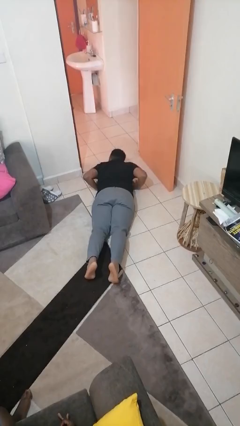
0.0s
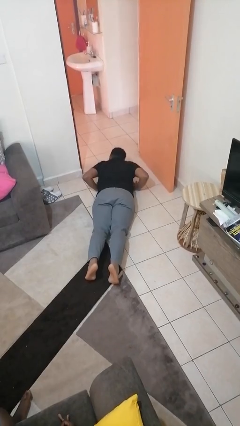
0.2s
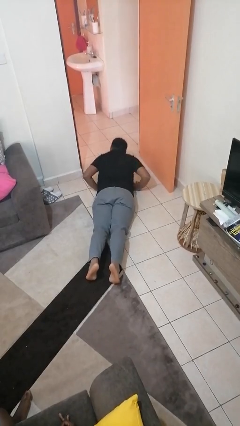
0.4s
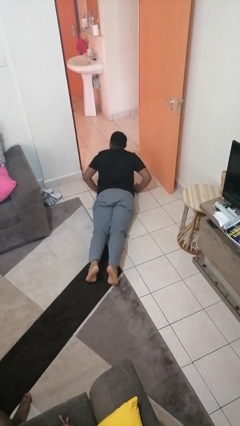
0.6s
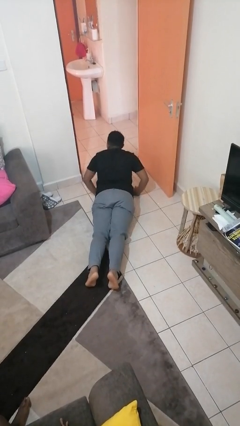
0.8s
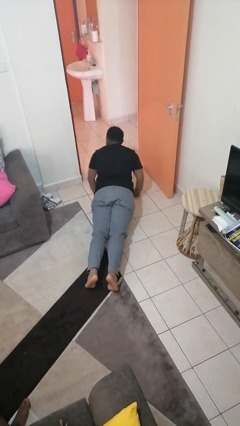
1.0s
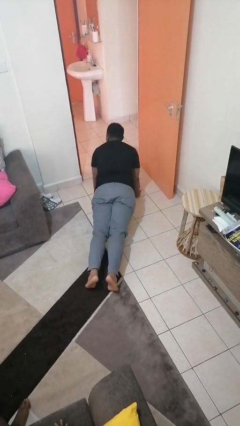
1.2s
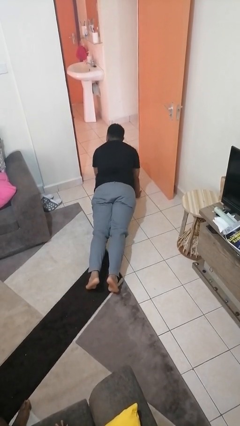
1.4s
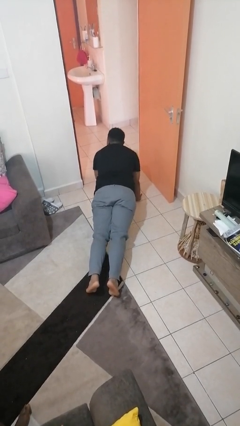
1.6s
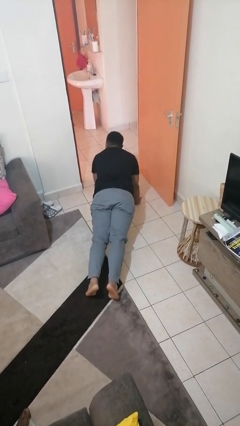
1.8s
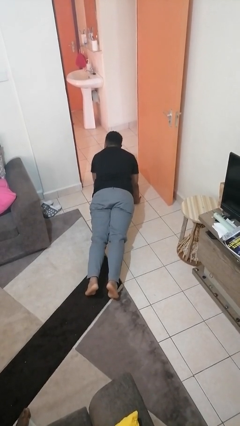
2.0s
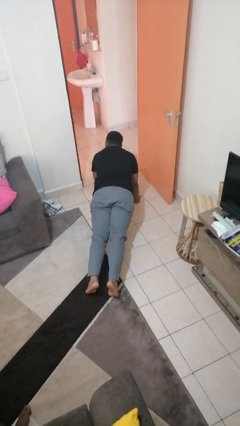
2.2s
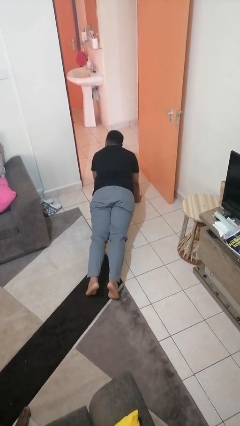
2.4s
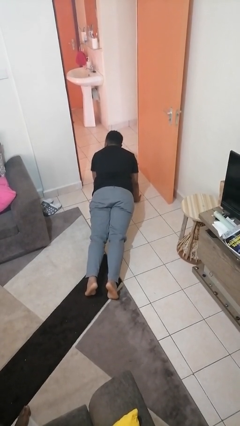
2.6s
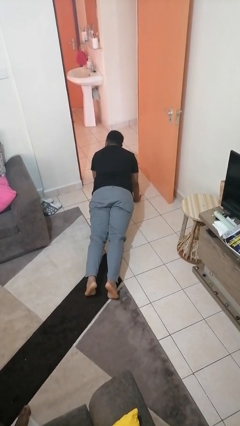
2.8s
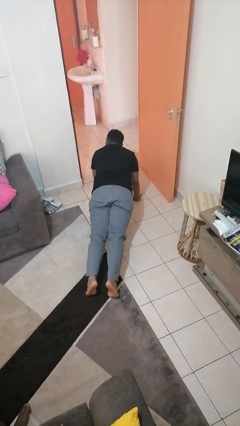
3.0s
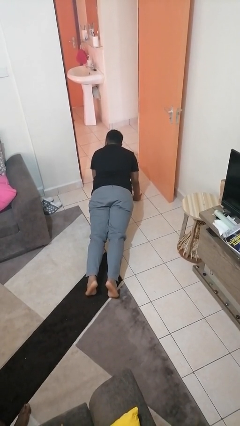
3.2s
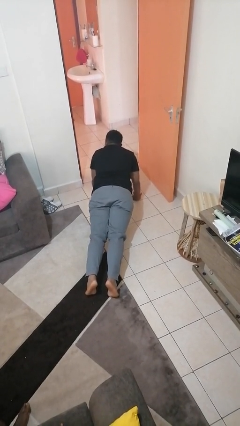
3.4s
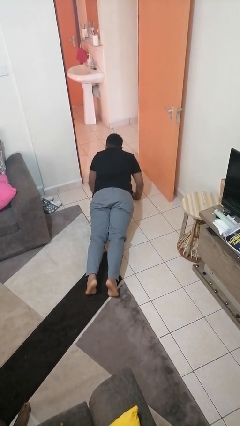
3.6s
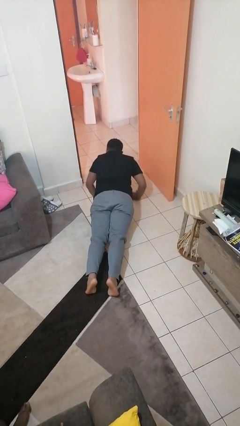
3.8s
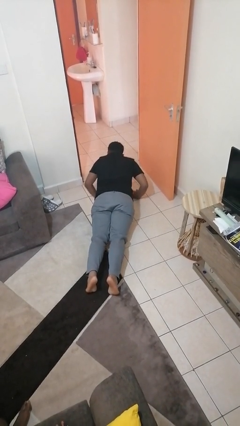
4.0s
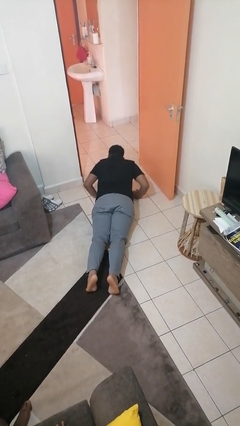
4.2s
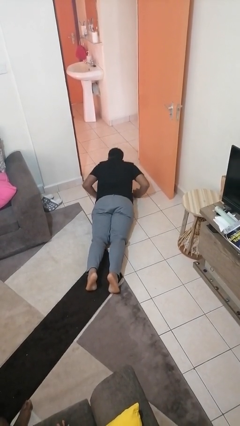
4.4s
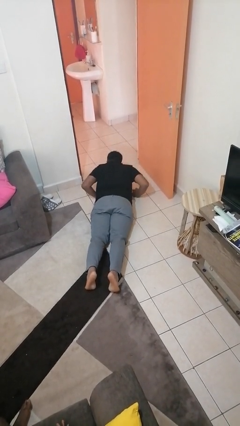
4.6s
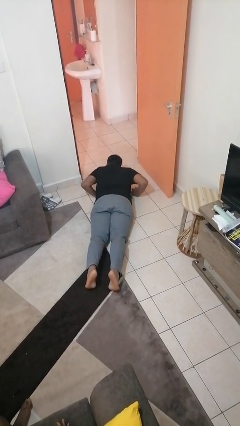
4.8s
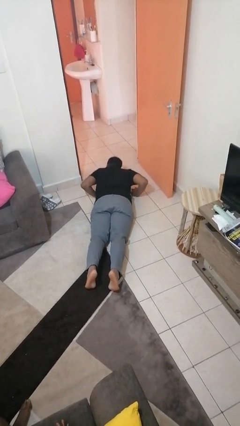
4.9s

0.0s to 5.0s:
person exercises with pushup

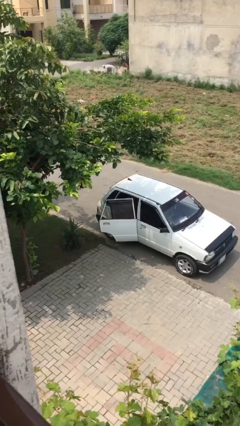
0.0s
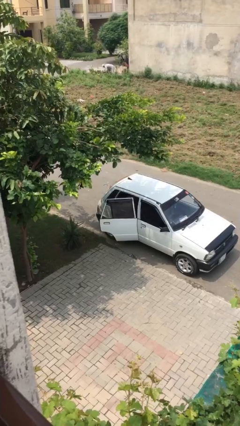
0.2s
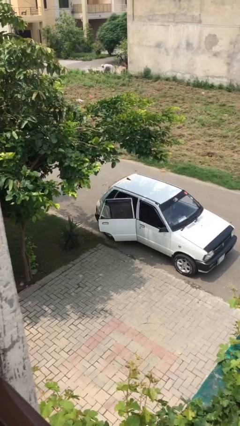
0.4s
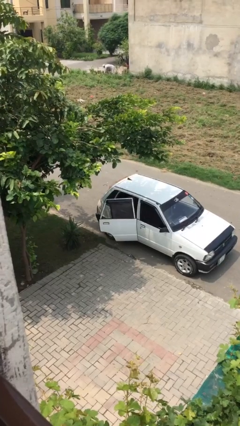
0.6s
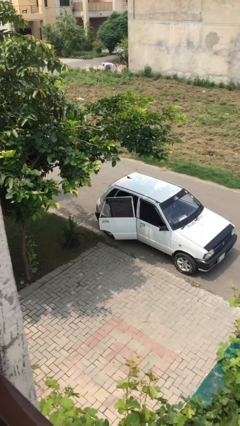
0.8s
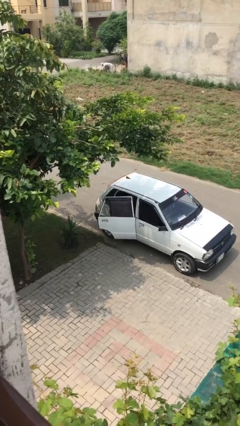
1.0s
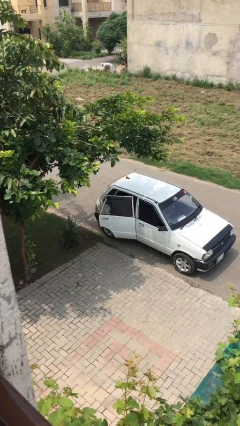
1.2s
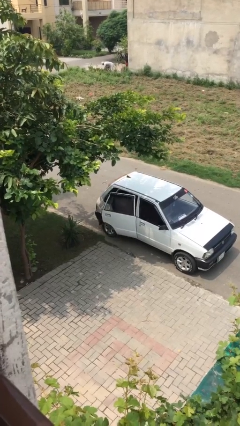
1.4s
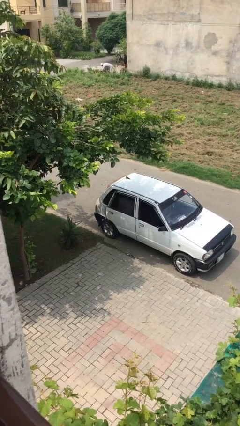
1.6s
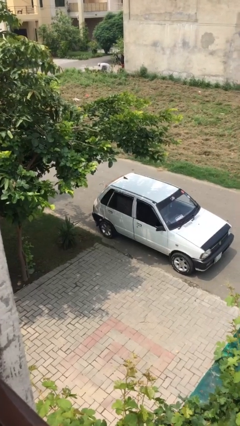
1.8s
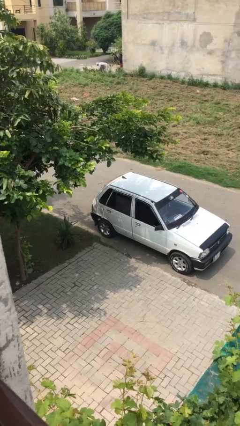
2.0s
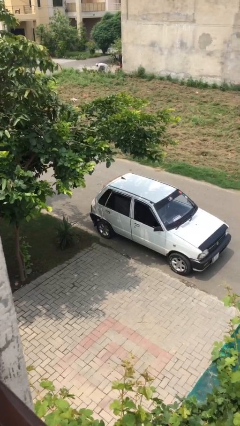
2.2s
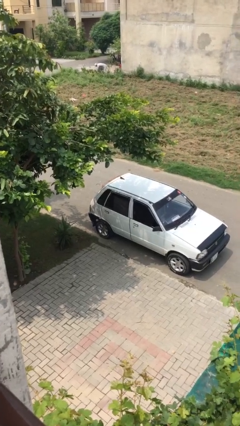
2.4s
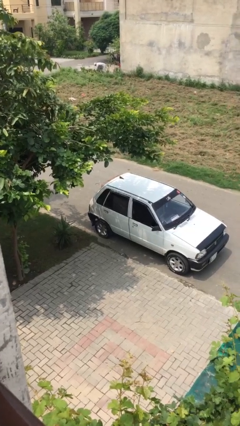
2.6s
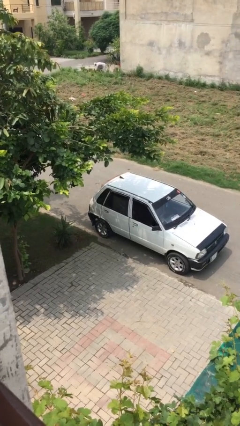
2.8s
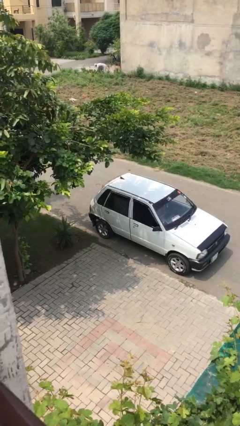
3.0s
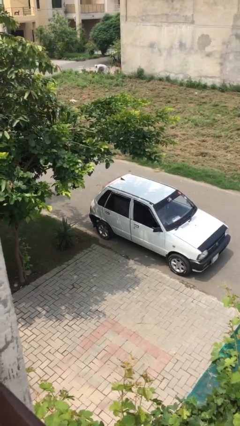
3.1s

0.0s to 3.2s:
person closes car door

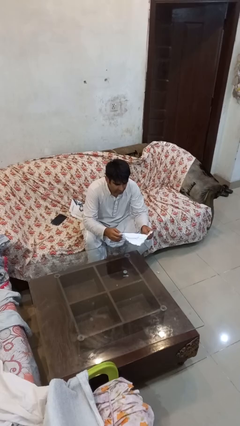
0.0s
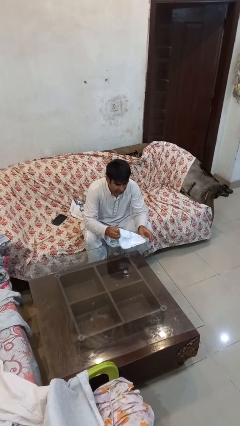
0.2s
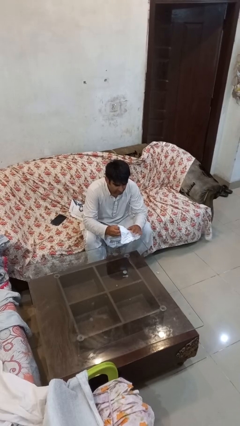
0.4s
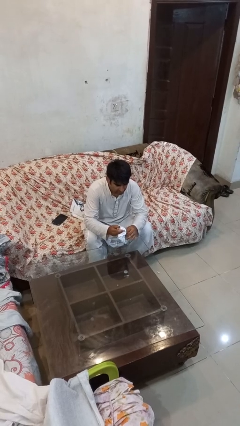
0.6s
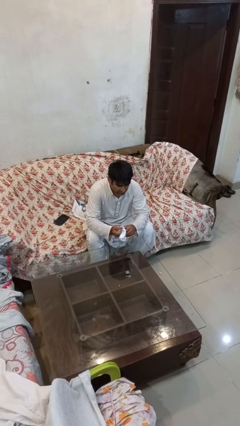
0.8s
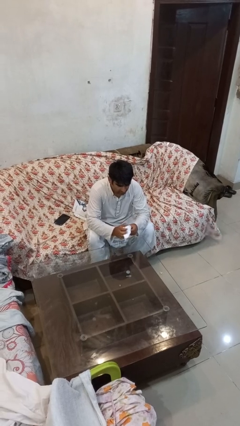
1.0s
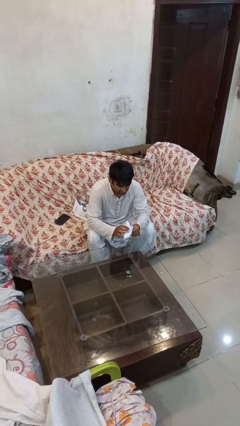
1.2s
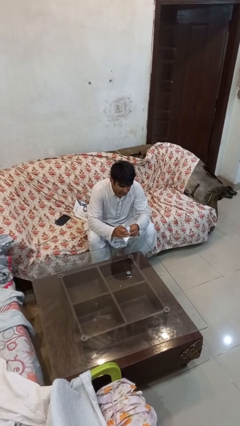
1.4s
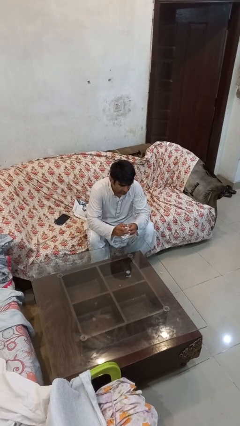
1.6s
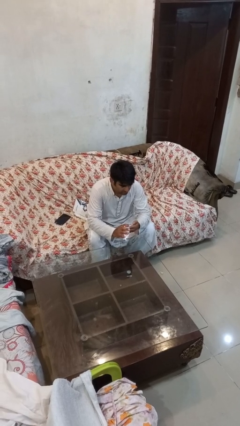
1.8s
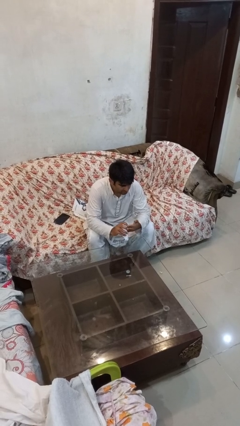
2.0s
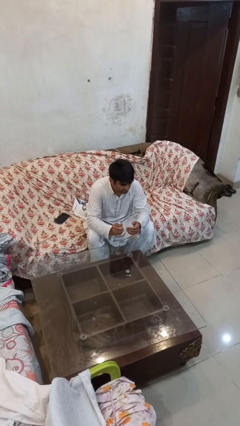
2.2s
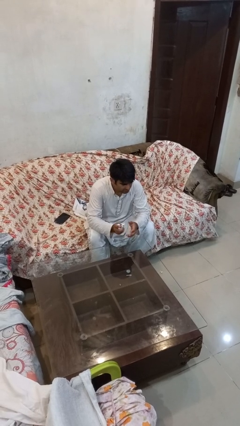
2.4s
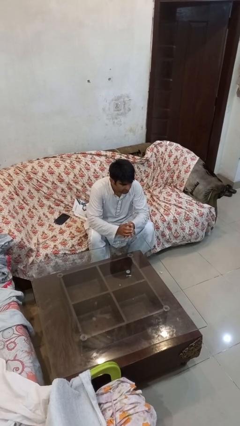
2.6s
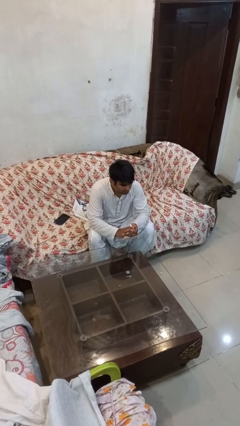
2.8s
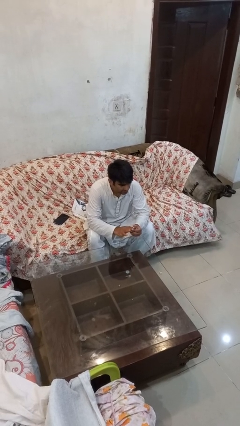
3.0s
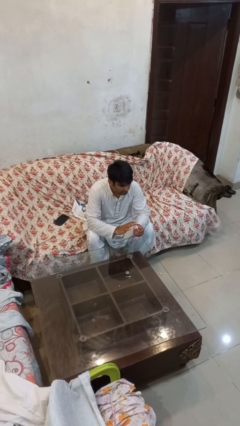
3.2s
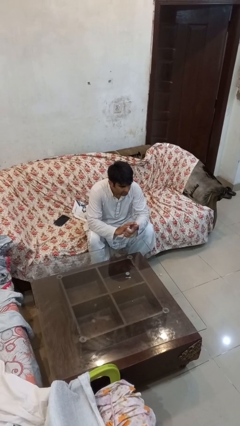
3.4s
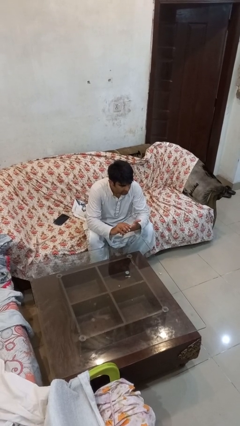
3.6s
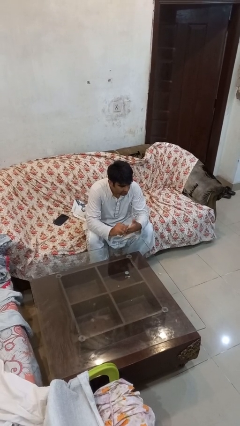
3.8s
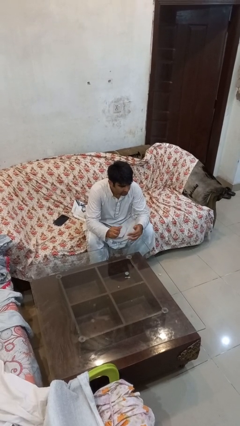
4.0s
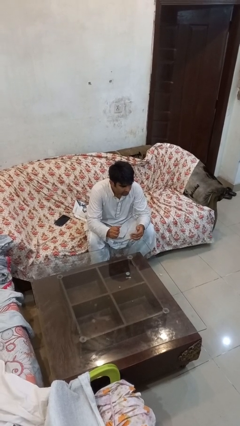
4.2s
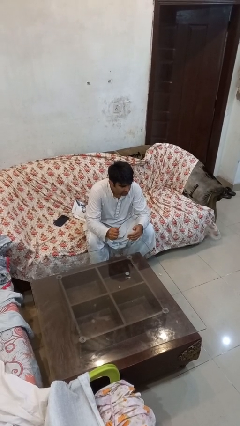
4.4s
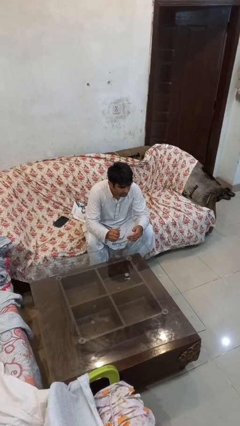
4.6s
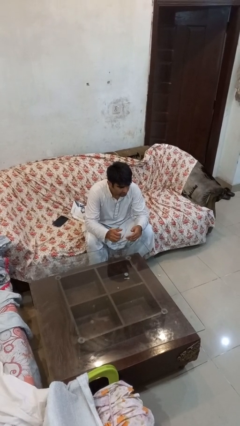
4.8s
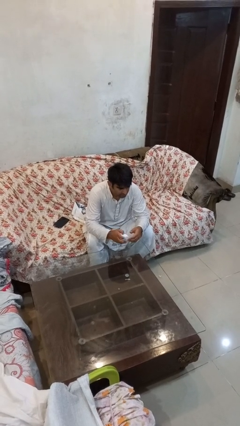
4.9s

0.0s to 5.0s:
person crumples paper

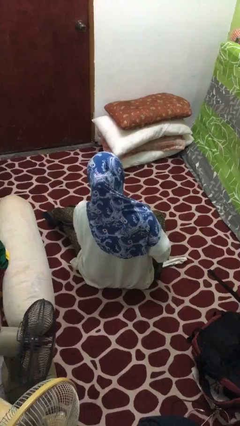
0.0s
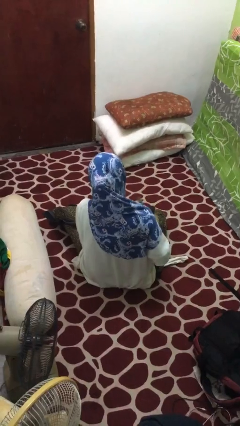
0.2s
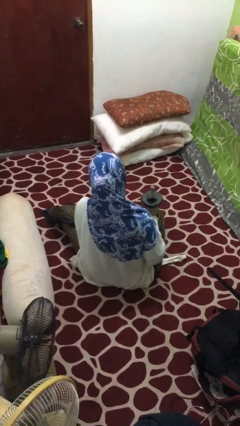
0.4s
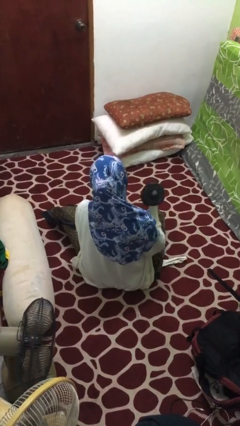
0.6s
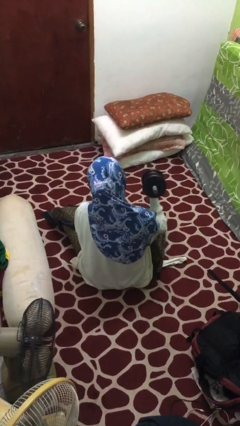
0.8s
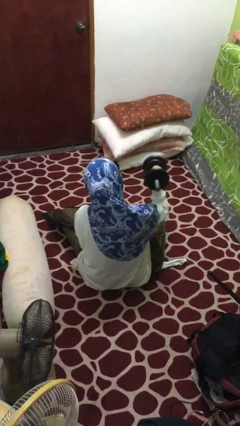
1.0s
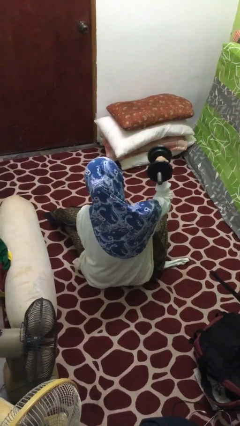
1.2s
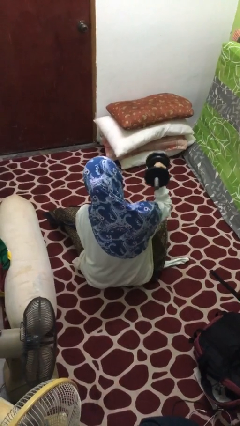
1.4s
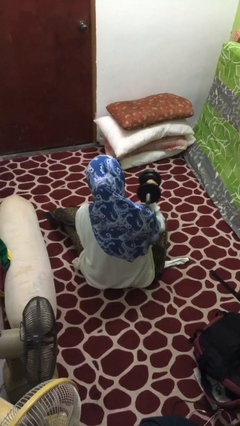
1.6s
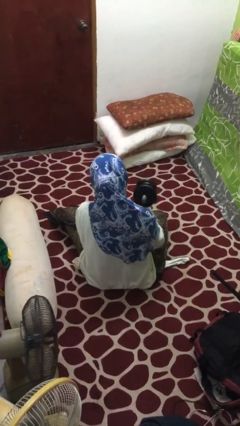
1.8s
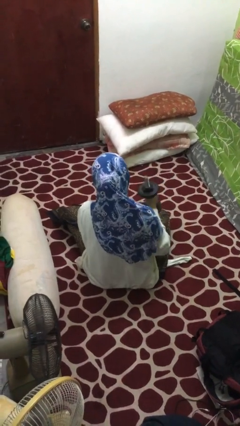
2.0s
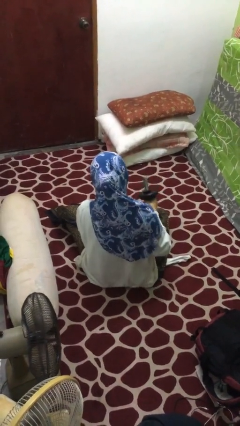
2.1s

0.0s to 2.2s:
person lifts dumbbells

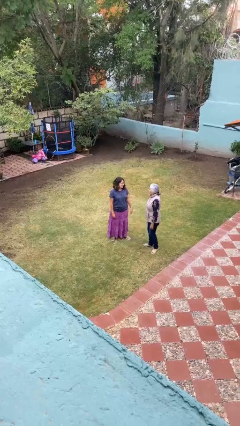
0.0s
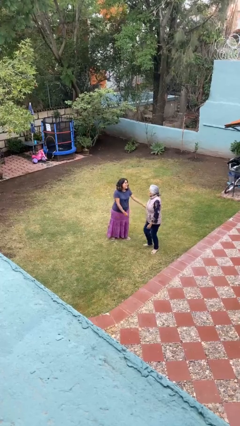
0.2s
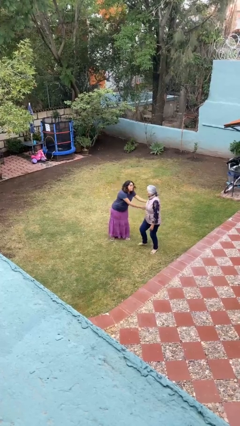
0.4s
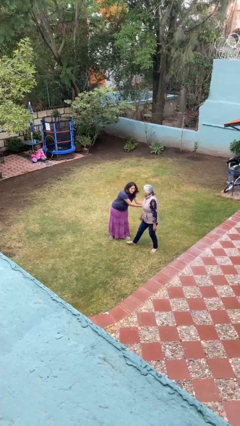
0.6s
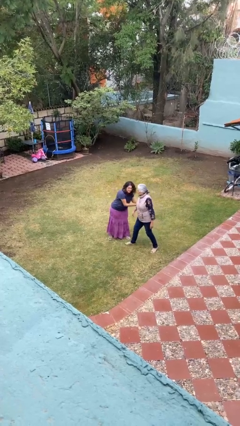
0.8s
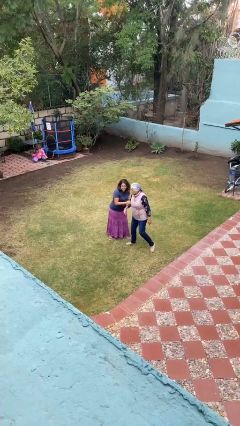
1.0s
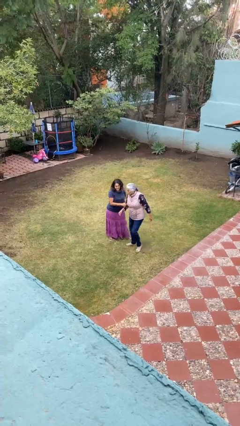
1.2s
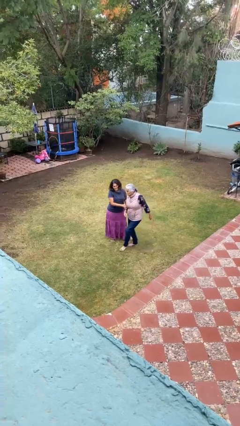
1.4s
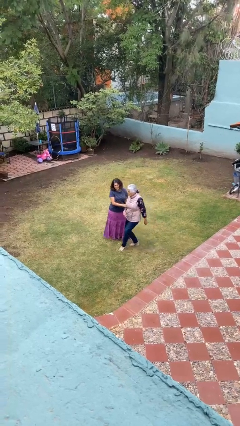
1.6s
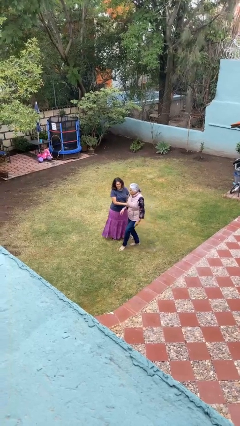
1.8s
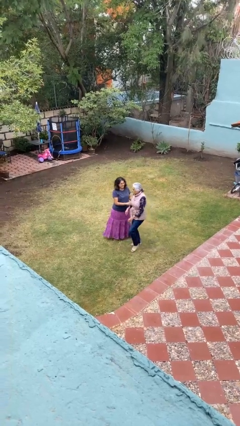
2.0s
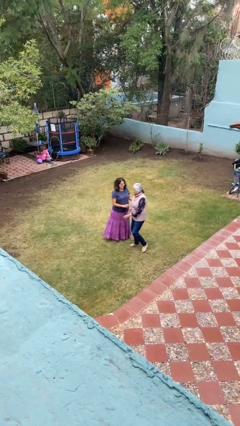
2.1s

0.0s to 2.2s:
person grabs person by bicep

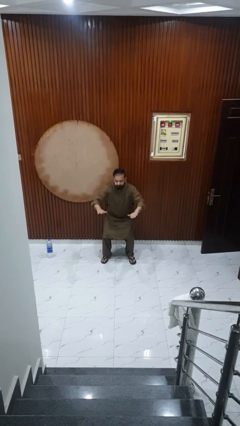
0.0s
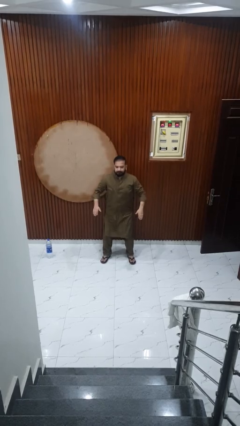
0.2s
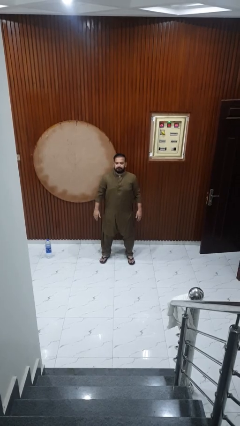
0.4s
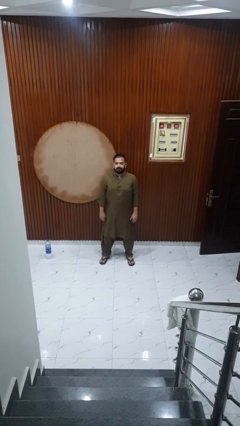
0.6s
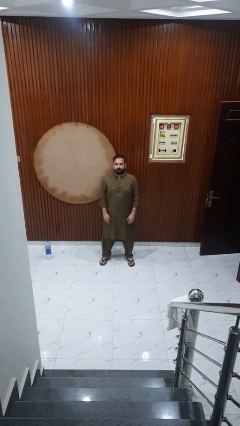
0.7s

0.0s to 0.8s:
person stands up
